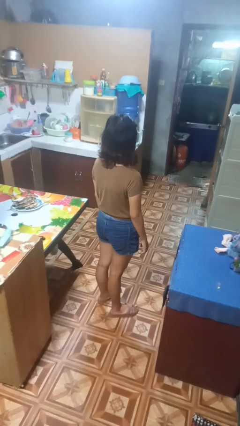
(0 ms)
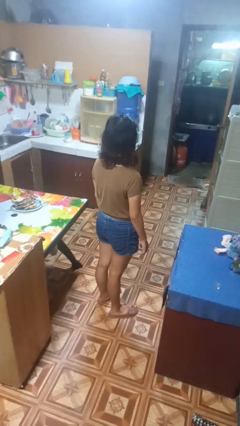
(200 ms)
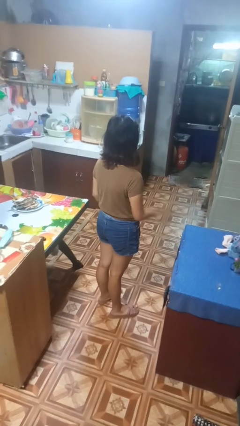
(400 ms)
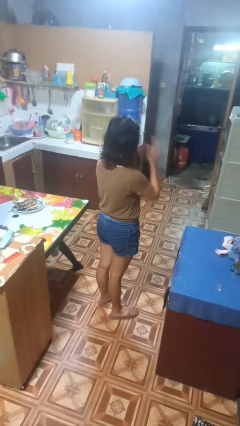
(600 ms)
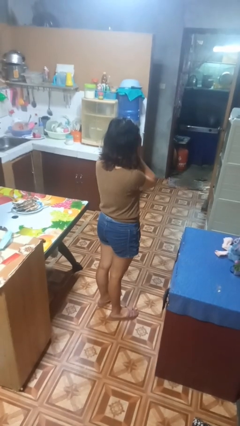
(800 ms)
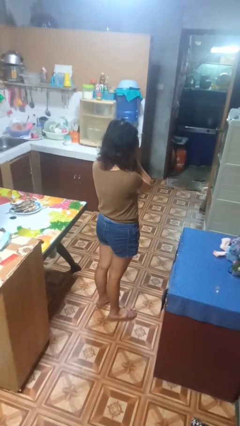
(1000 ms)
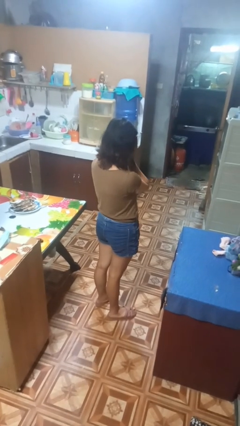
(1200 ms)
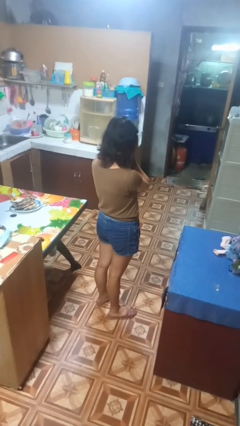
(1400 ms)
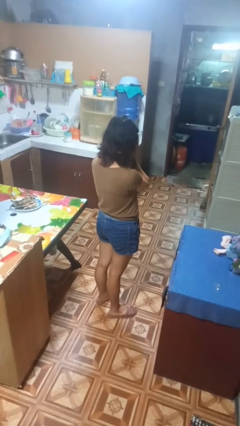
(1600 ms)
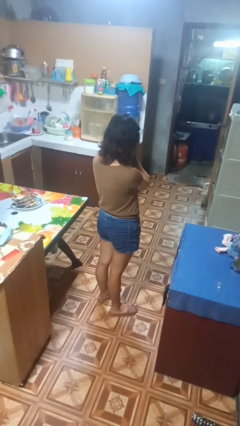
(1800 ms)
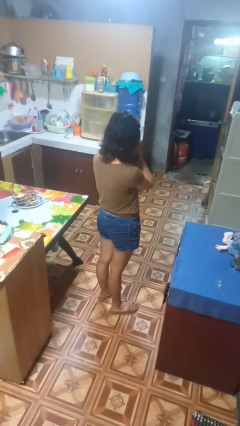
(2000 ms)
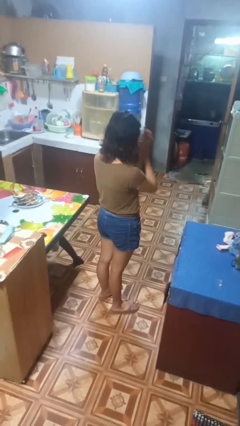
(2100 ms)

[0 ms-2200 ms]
person covers face with hands

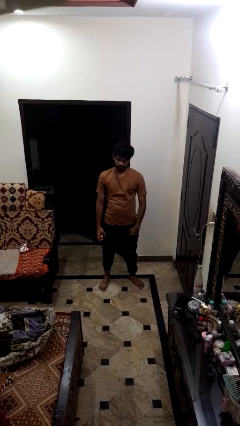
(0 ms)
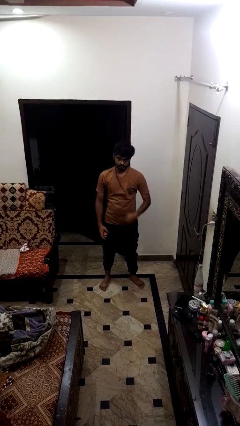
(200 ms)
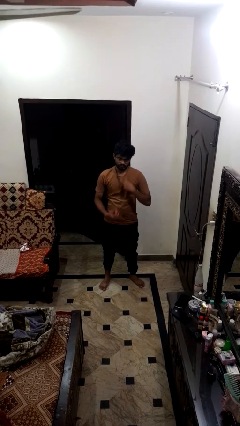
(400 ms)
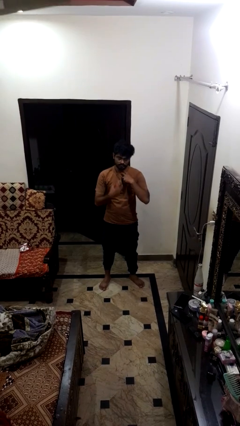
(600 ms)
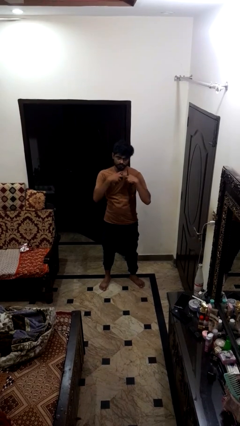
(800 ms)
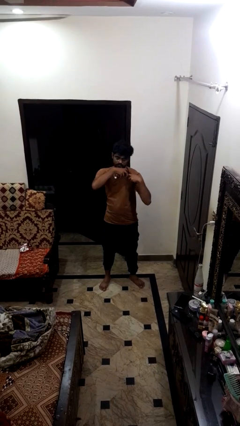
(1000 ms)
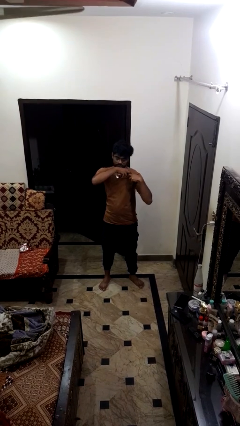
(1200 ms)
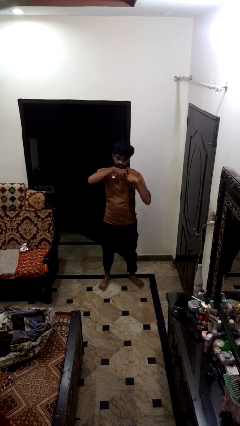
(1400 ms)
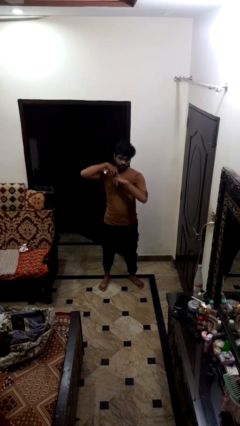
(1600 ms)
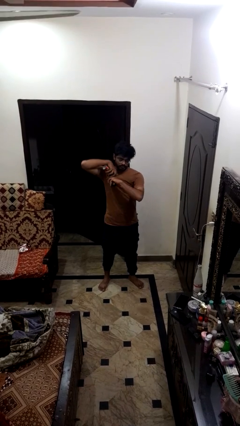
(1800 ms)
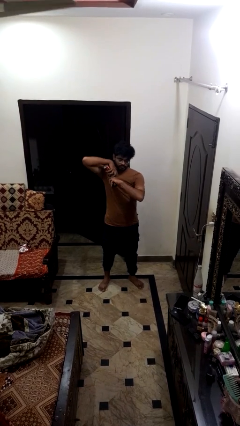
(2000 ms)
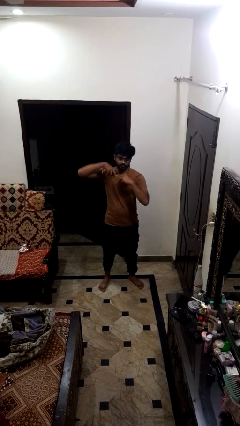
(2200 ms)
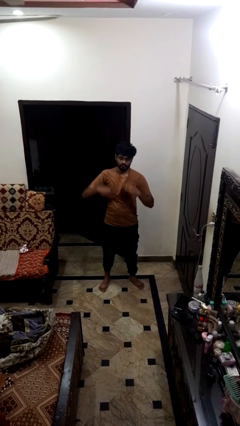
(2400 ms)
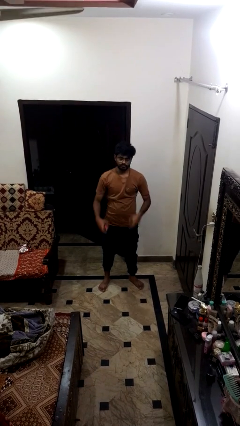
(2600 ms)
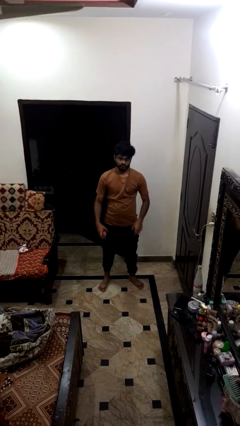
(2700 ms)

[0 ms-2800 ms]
person applies deodorant

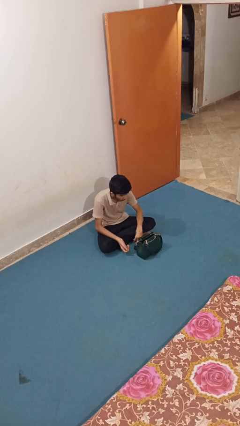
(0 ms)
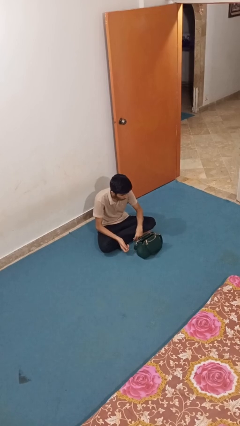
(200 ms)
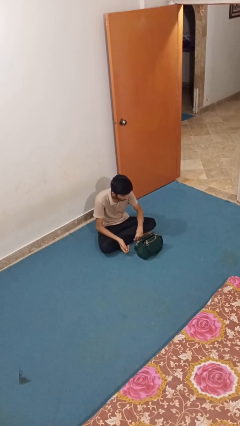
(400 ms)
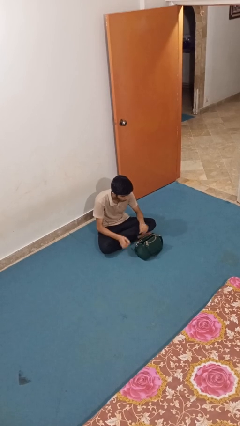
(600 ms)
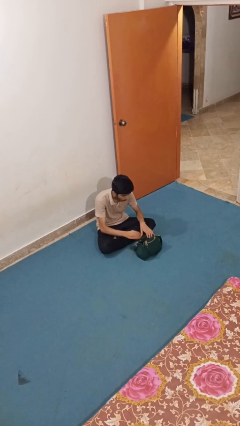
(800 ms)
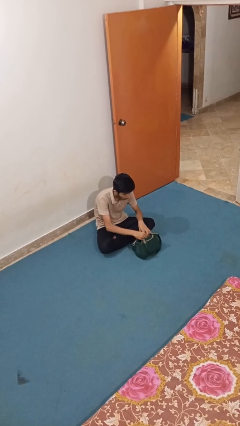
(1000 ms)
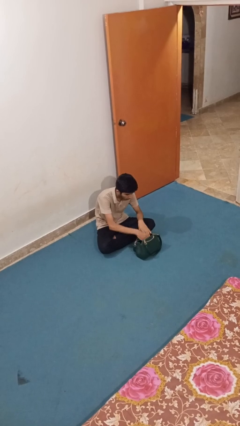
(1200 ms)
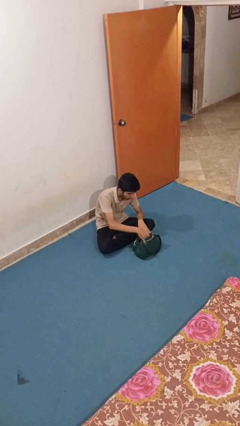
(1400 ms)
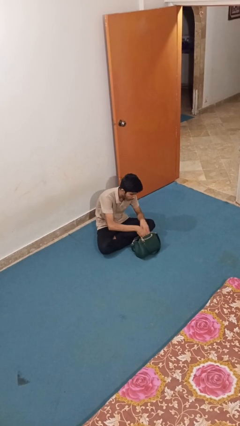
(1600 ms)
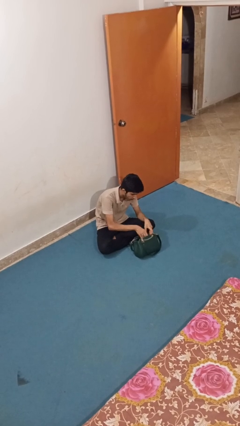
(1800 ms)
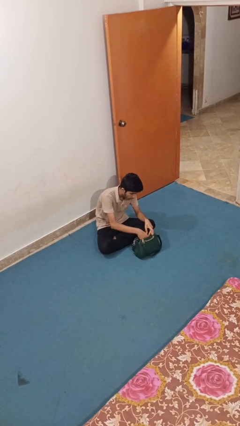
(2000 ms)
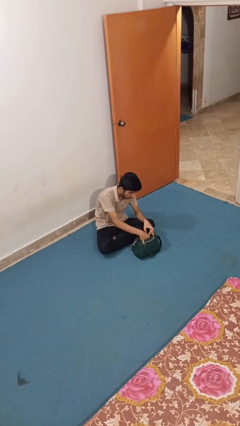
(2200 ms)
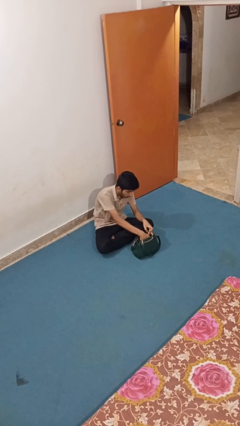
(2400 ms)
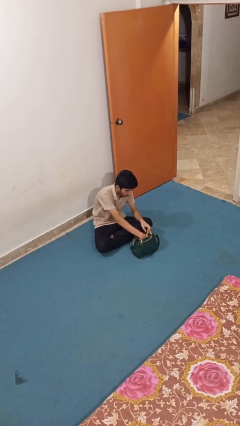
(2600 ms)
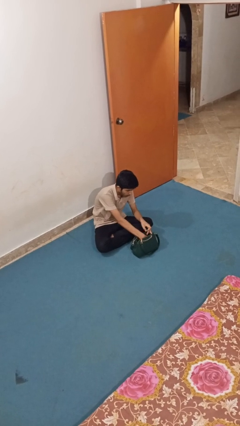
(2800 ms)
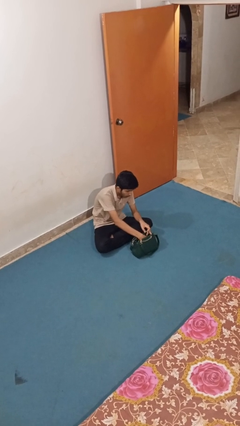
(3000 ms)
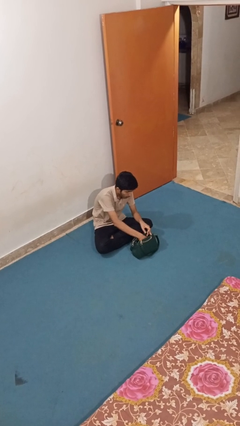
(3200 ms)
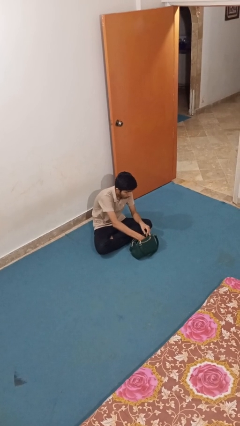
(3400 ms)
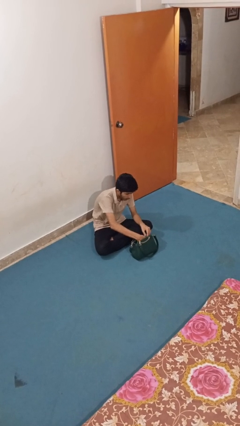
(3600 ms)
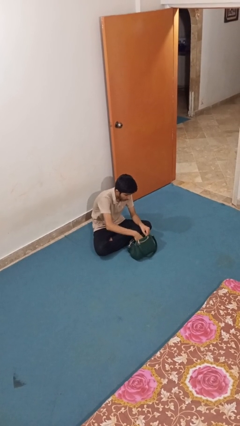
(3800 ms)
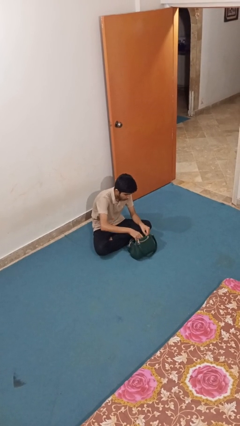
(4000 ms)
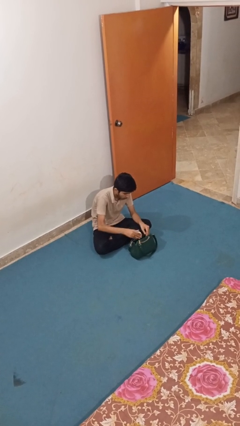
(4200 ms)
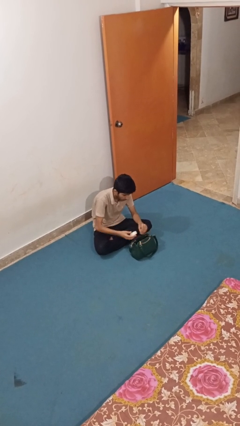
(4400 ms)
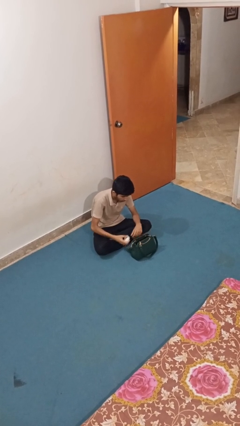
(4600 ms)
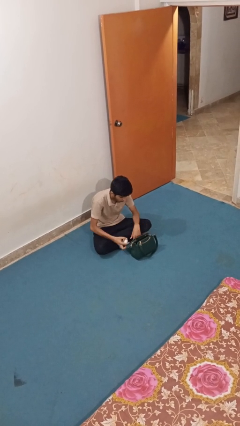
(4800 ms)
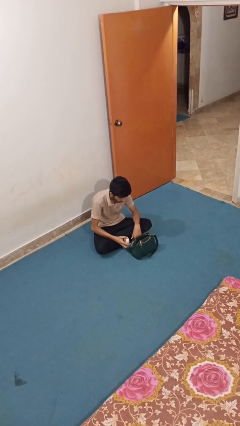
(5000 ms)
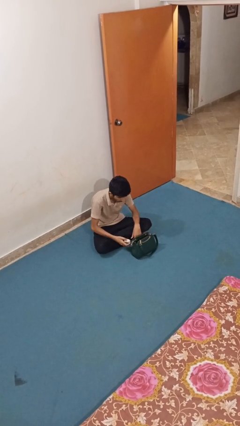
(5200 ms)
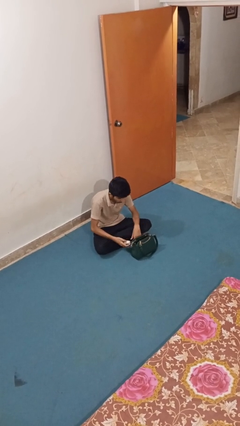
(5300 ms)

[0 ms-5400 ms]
person searches in purse

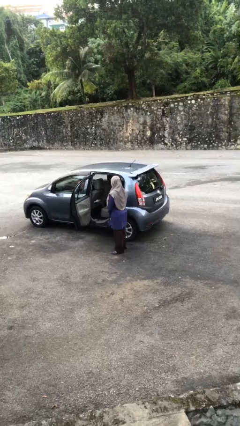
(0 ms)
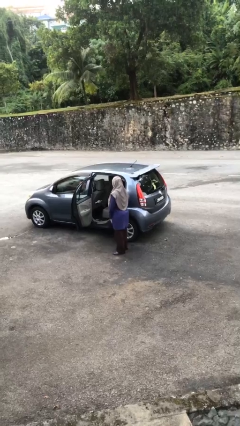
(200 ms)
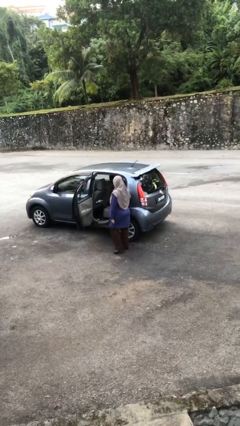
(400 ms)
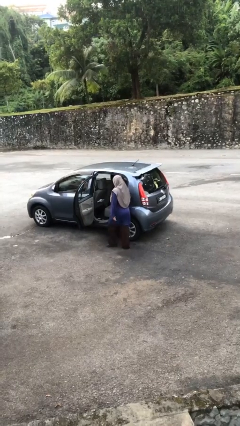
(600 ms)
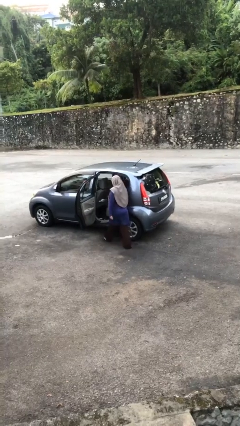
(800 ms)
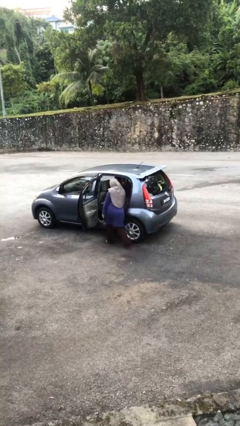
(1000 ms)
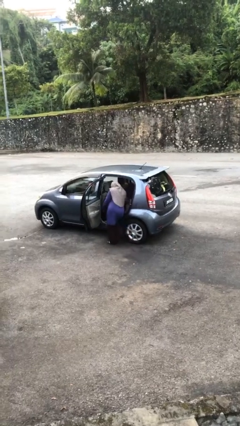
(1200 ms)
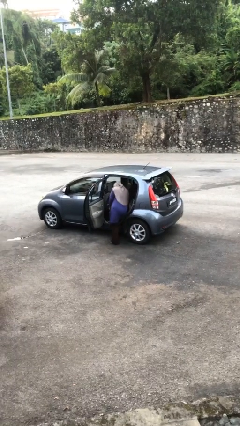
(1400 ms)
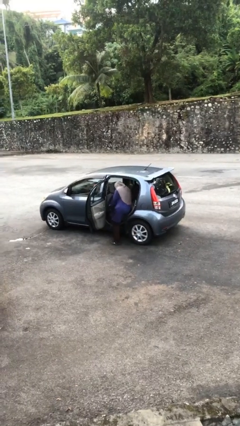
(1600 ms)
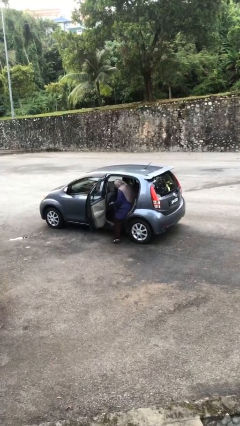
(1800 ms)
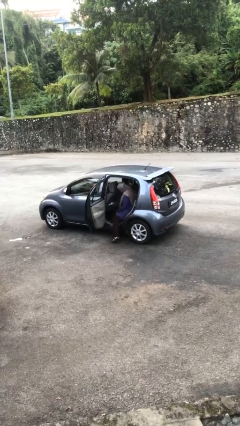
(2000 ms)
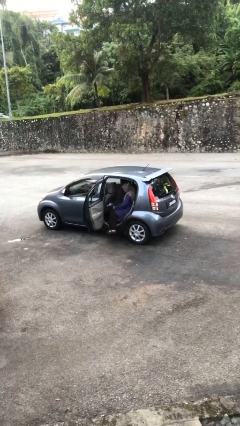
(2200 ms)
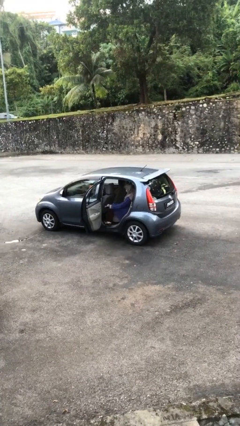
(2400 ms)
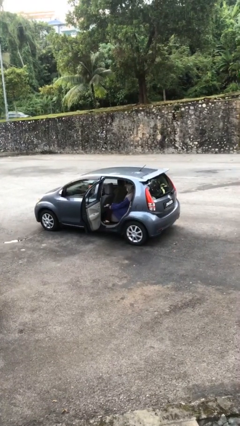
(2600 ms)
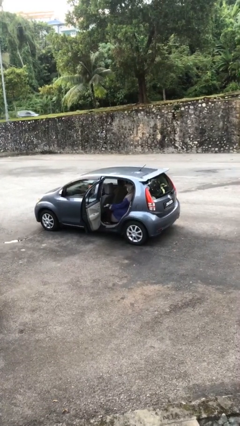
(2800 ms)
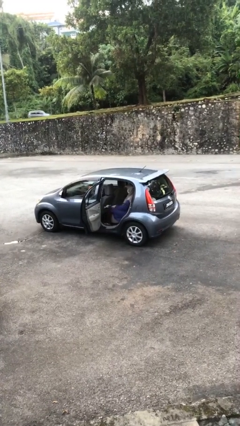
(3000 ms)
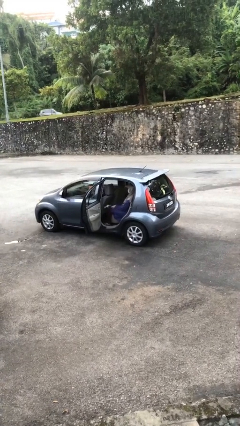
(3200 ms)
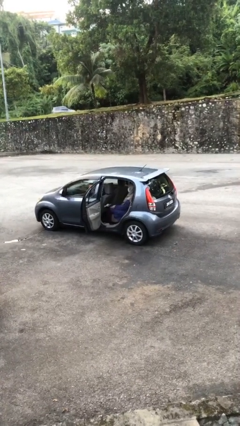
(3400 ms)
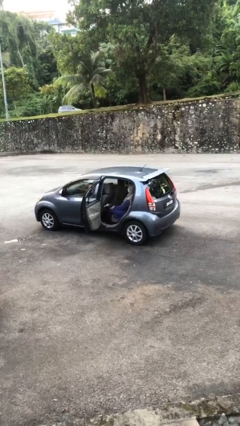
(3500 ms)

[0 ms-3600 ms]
person enters car

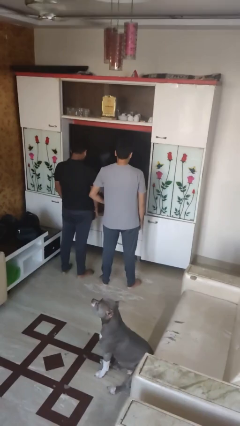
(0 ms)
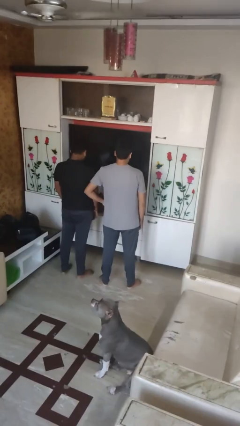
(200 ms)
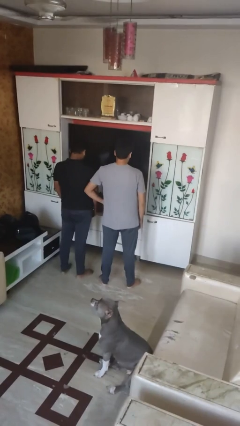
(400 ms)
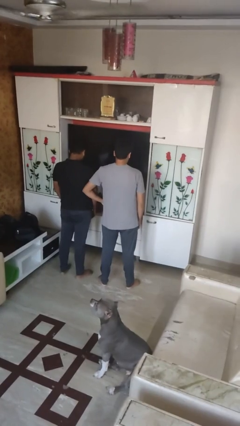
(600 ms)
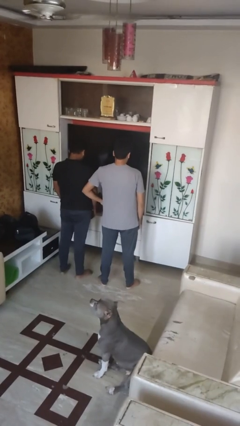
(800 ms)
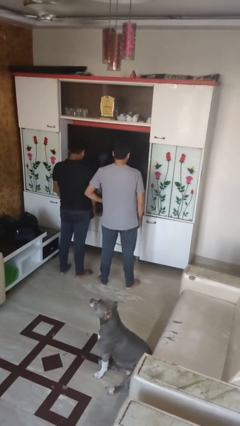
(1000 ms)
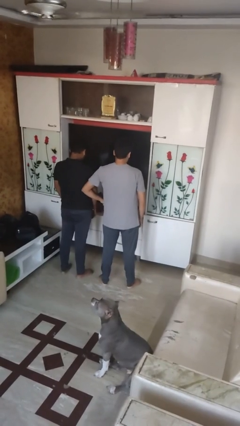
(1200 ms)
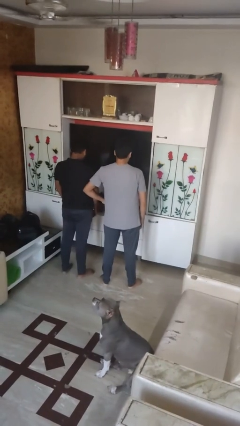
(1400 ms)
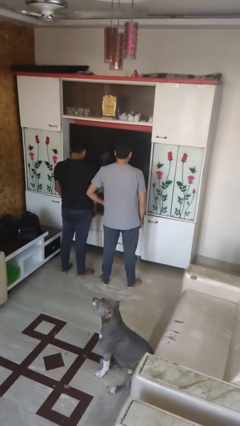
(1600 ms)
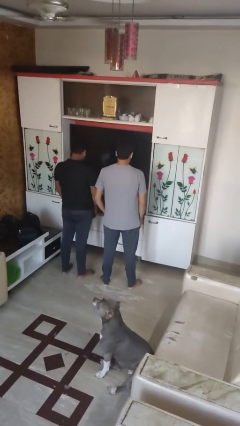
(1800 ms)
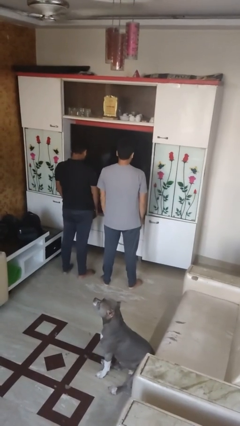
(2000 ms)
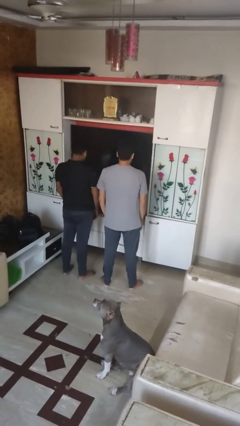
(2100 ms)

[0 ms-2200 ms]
person nudges person with elbow

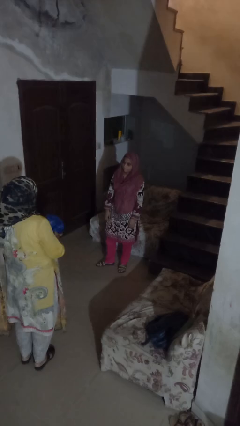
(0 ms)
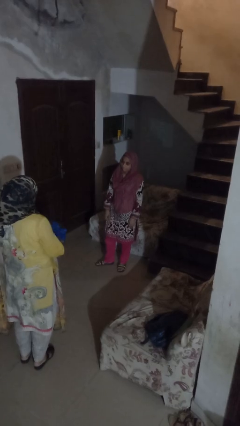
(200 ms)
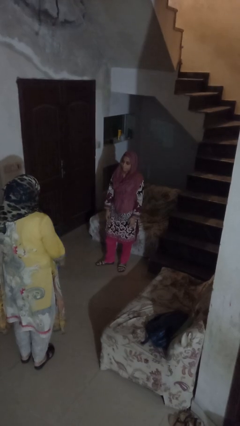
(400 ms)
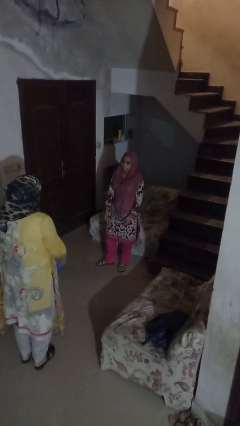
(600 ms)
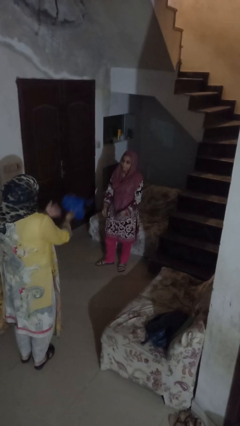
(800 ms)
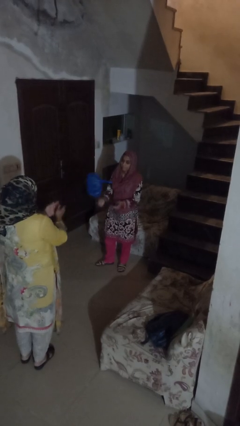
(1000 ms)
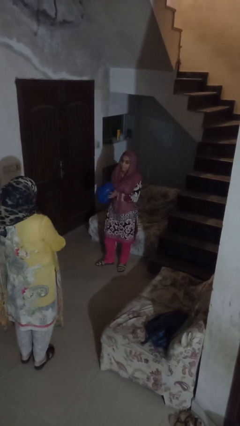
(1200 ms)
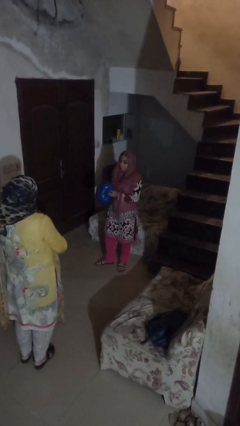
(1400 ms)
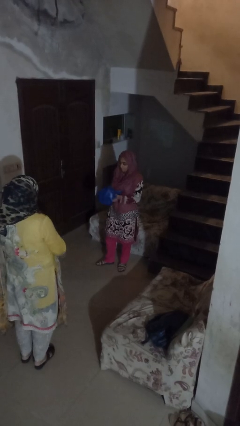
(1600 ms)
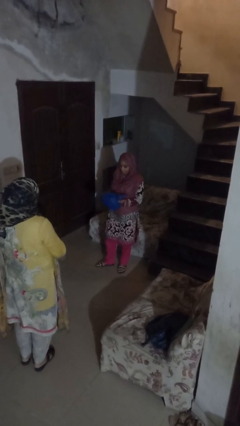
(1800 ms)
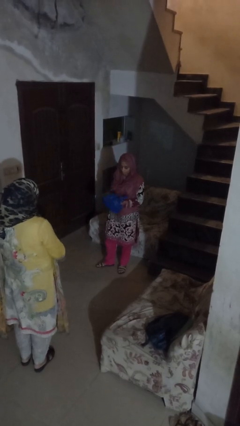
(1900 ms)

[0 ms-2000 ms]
person catches object from person
